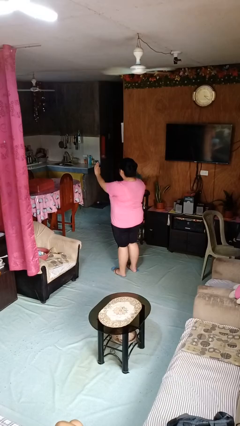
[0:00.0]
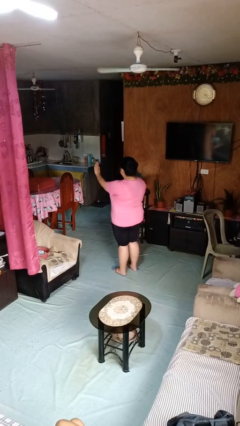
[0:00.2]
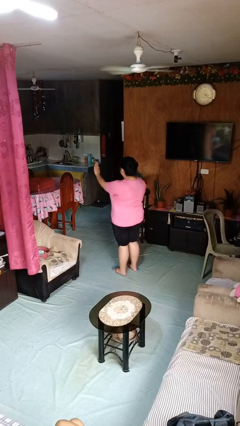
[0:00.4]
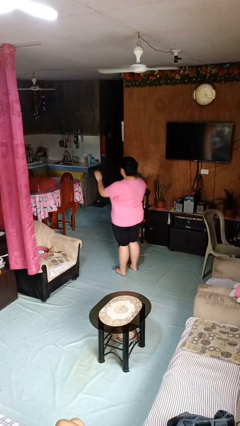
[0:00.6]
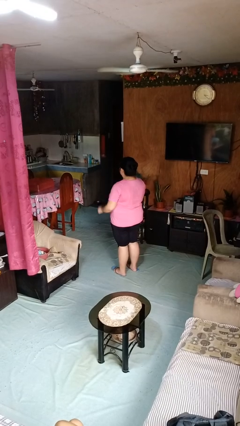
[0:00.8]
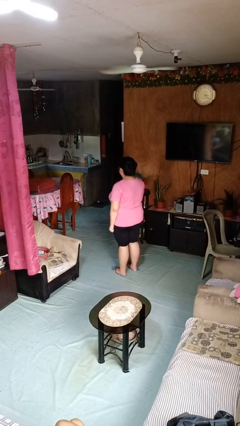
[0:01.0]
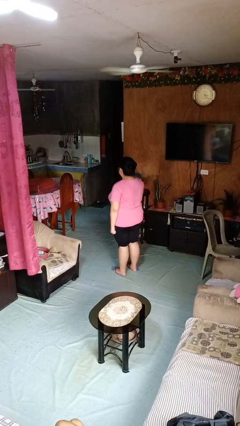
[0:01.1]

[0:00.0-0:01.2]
person gestures stop

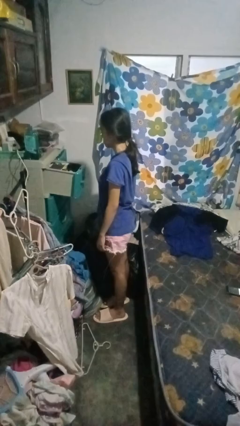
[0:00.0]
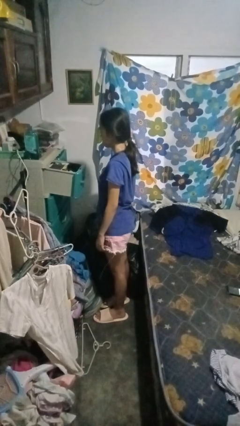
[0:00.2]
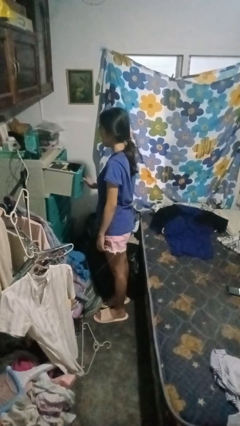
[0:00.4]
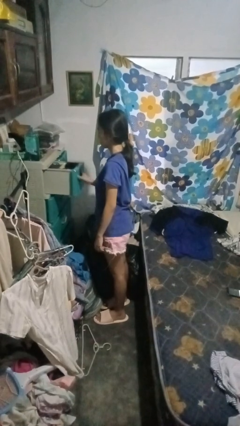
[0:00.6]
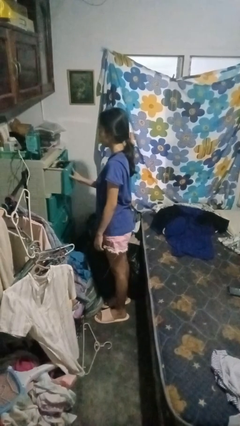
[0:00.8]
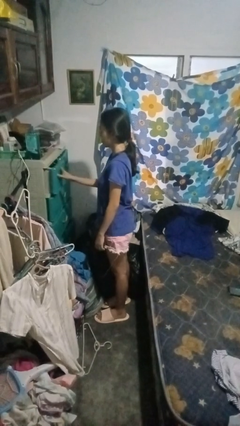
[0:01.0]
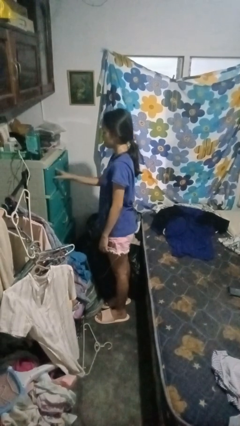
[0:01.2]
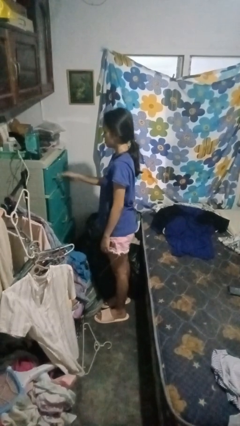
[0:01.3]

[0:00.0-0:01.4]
person closes dresser drawer

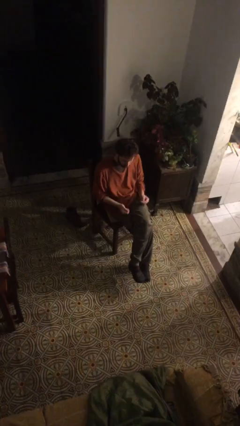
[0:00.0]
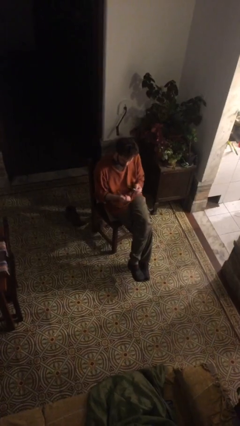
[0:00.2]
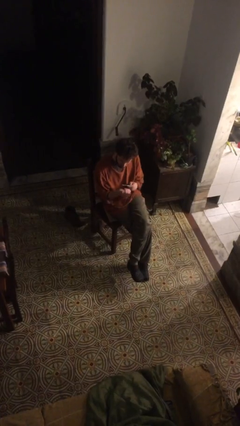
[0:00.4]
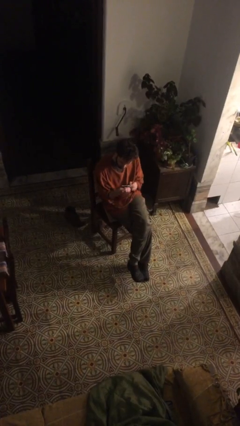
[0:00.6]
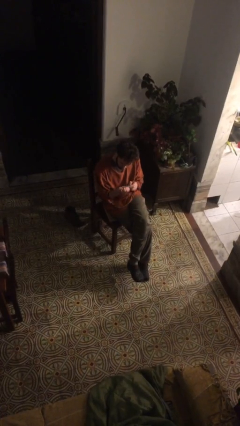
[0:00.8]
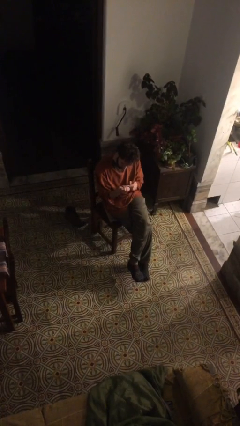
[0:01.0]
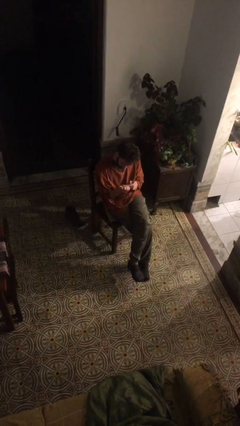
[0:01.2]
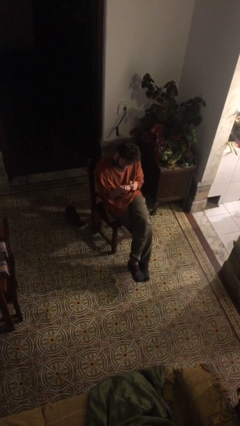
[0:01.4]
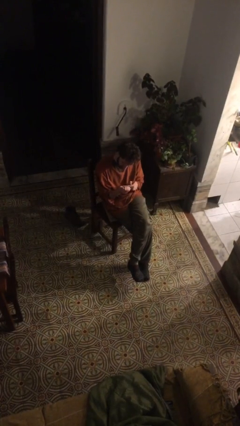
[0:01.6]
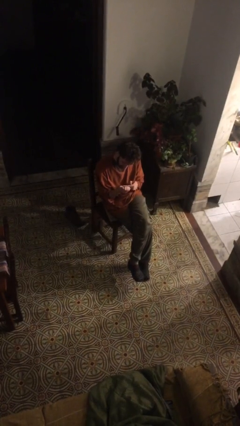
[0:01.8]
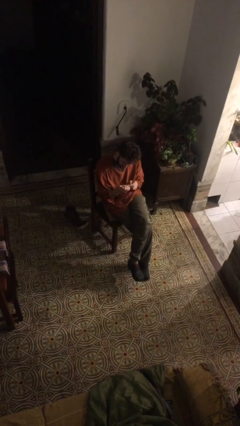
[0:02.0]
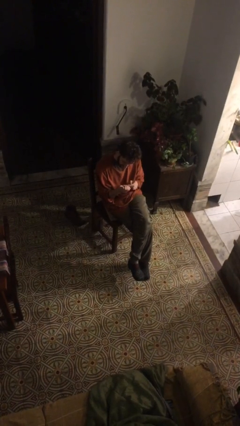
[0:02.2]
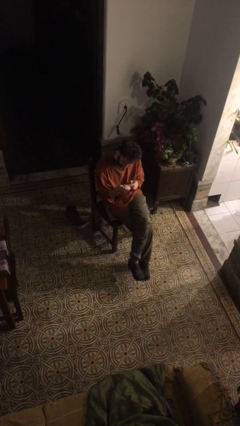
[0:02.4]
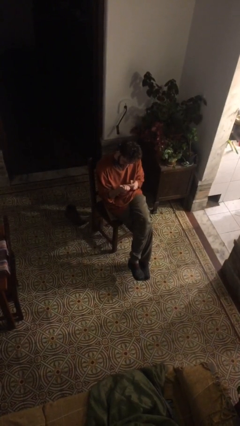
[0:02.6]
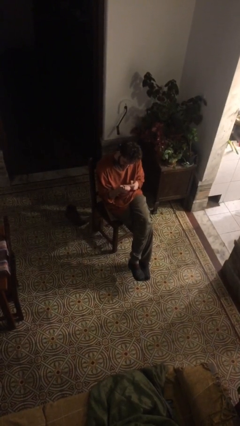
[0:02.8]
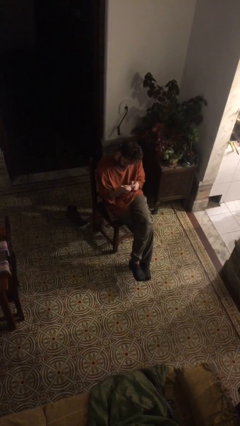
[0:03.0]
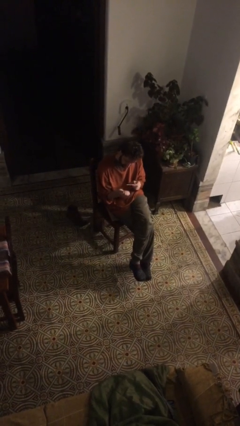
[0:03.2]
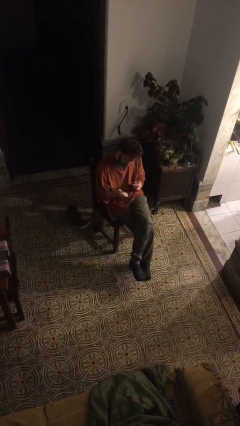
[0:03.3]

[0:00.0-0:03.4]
person files fingernails

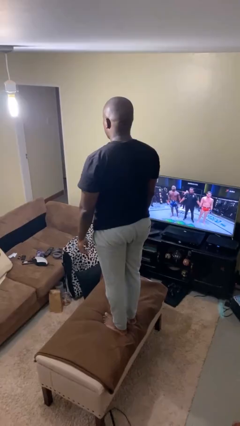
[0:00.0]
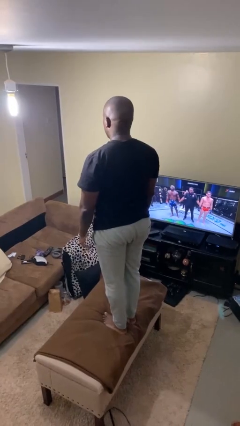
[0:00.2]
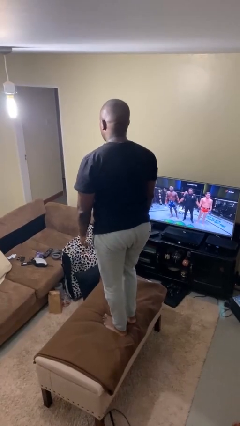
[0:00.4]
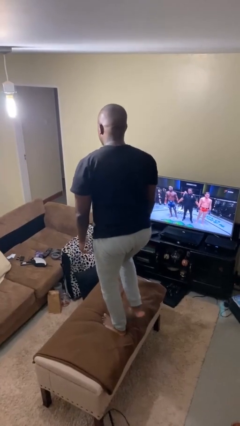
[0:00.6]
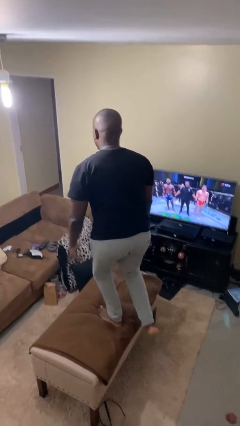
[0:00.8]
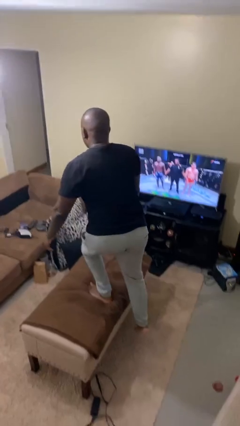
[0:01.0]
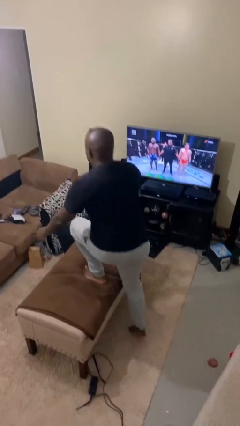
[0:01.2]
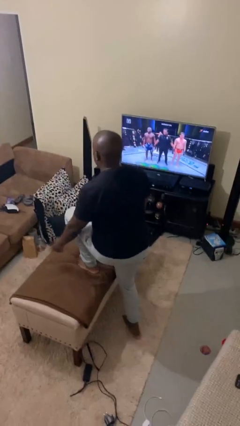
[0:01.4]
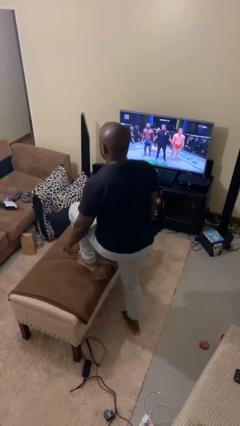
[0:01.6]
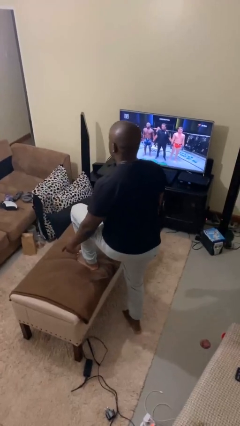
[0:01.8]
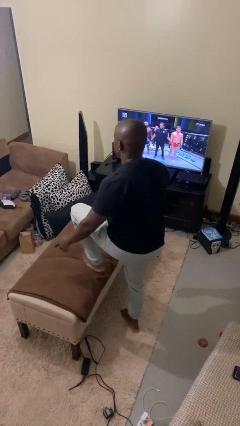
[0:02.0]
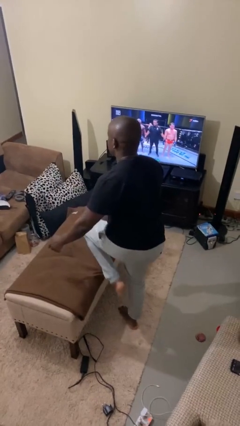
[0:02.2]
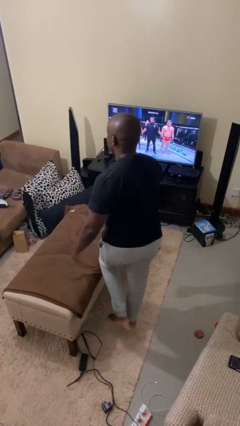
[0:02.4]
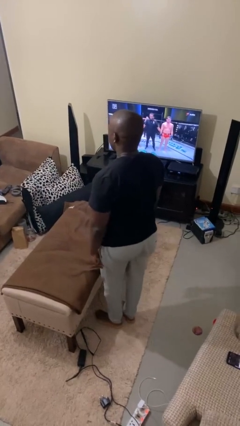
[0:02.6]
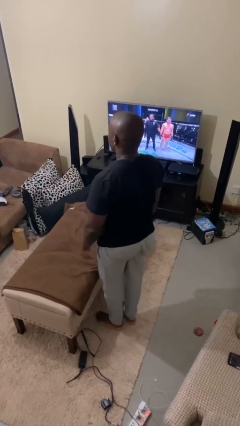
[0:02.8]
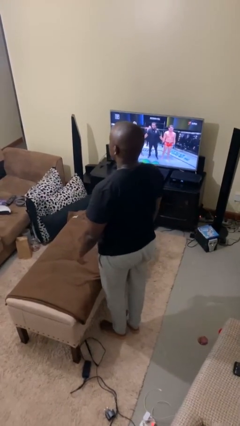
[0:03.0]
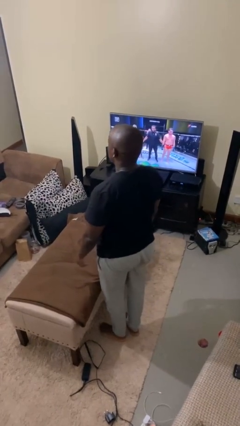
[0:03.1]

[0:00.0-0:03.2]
person climbs off table

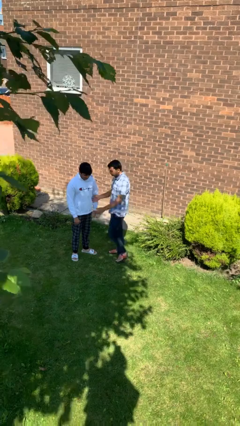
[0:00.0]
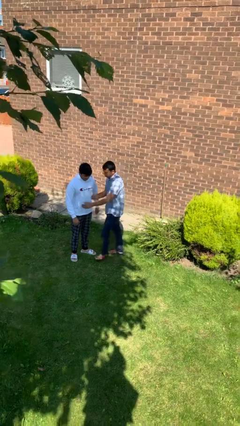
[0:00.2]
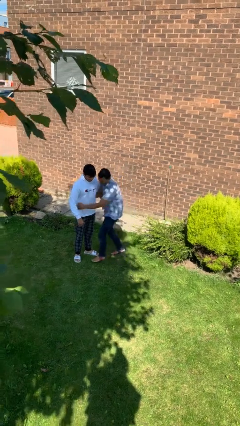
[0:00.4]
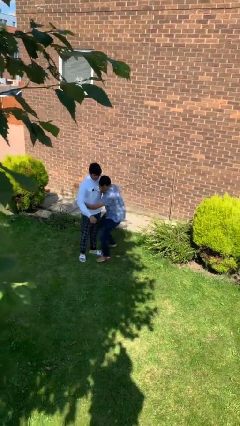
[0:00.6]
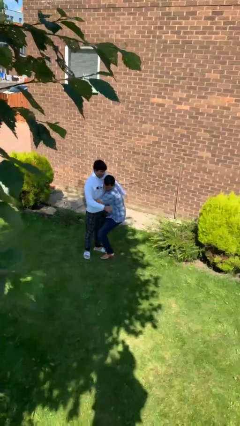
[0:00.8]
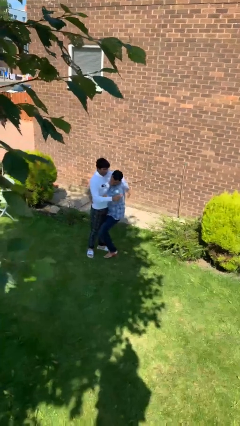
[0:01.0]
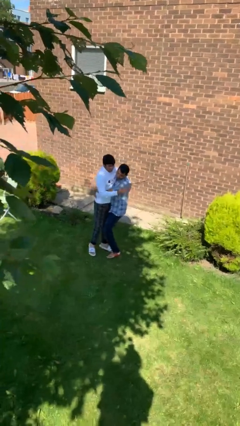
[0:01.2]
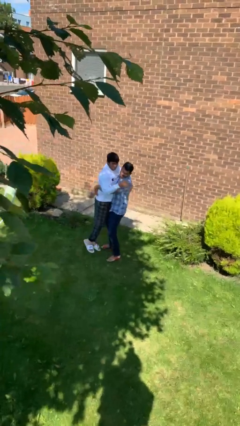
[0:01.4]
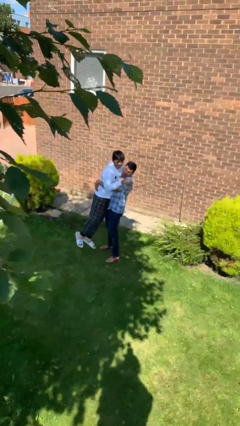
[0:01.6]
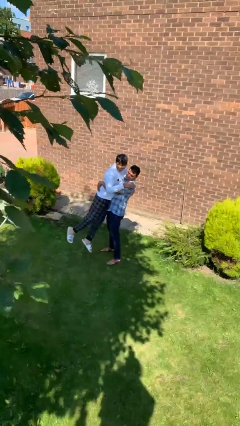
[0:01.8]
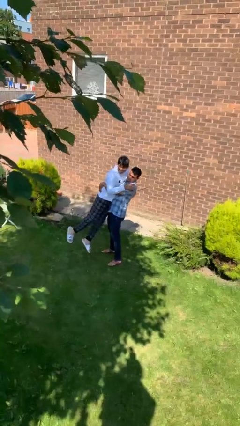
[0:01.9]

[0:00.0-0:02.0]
person picks up person

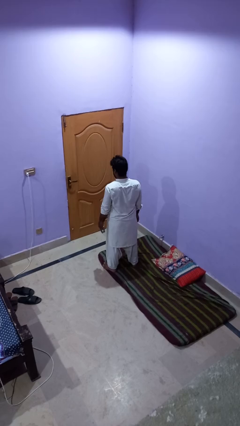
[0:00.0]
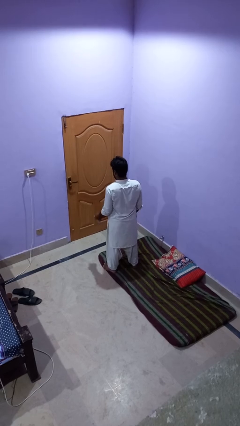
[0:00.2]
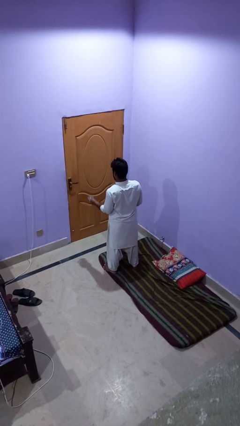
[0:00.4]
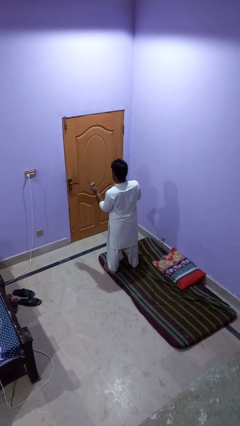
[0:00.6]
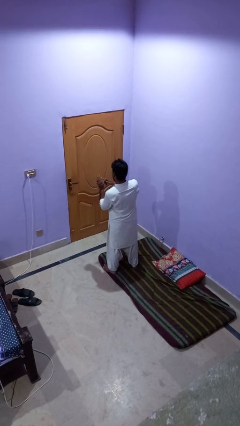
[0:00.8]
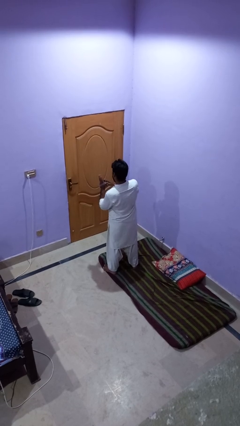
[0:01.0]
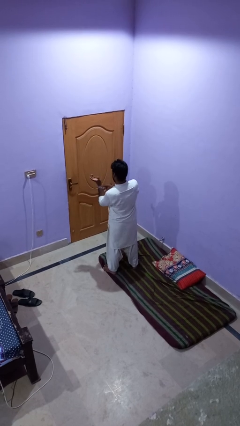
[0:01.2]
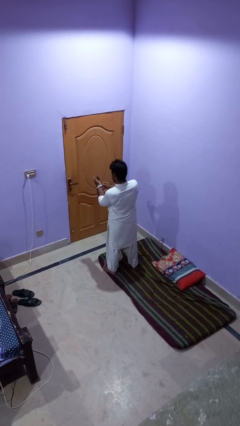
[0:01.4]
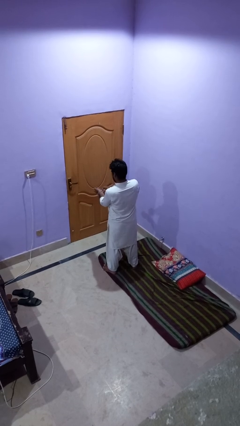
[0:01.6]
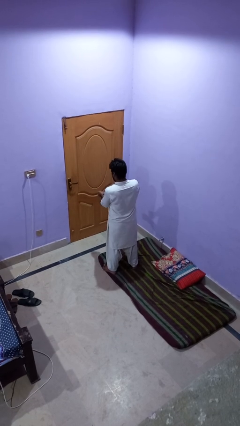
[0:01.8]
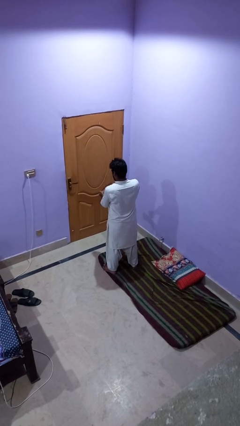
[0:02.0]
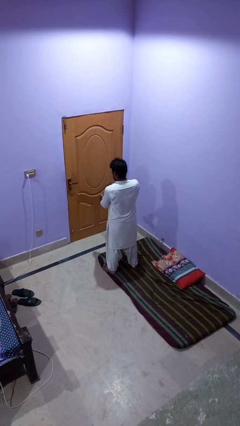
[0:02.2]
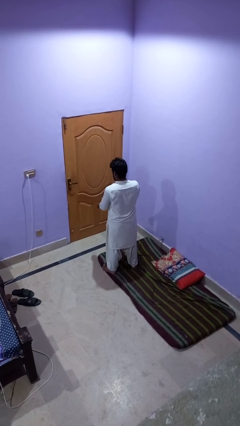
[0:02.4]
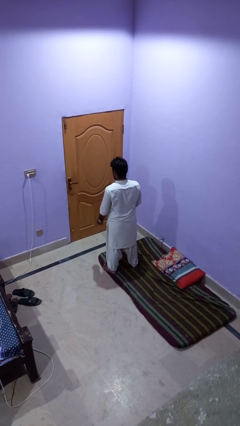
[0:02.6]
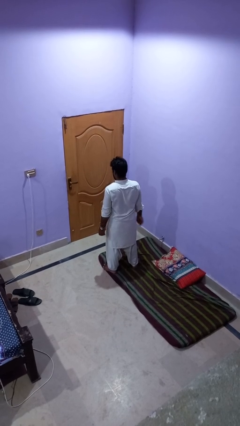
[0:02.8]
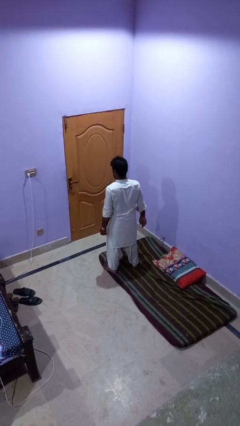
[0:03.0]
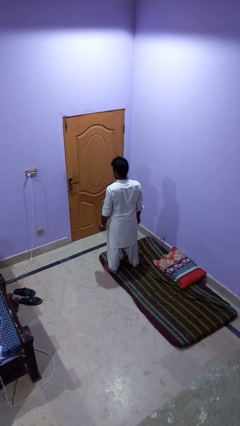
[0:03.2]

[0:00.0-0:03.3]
person puts on wristwatch

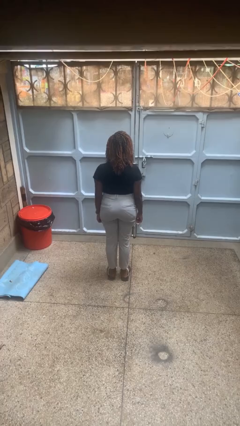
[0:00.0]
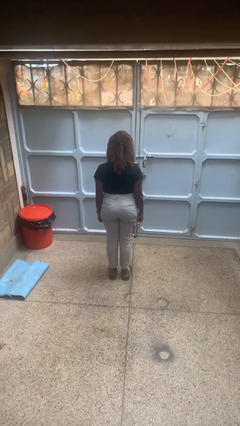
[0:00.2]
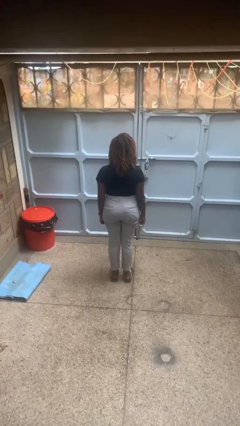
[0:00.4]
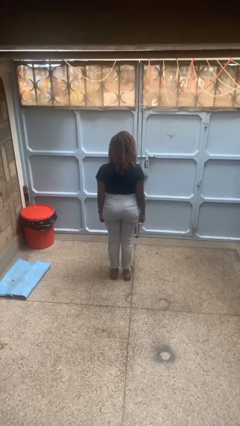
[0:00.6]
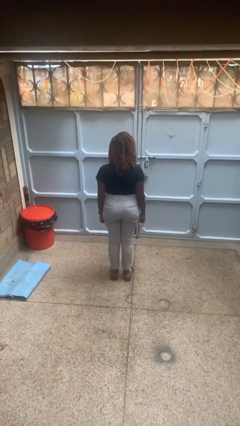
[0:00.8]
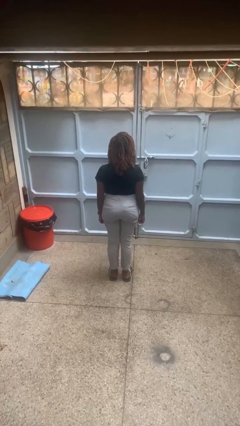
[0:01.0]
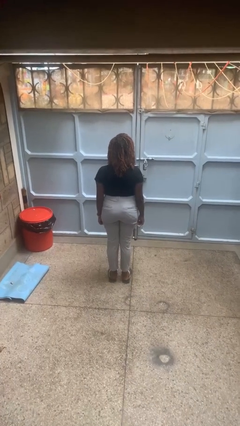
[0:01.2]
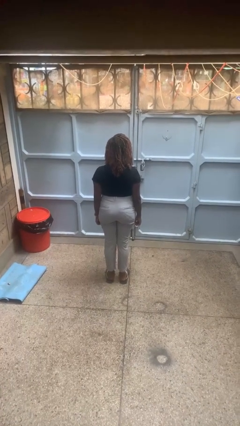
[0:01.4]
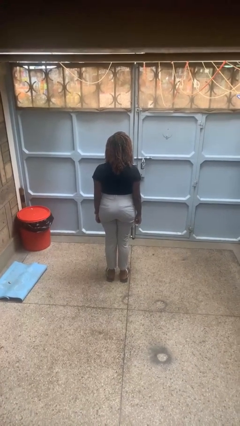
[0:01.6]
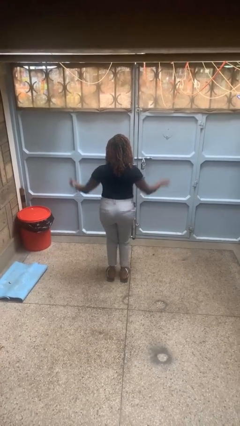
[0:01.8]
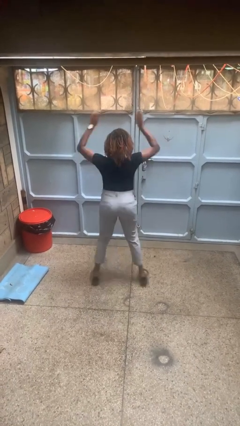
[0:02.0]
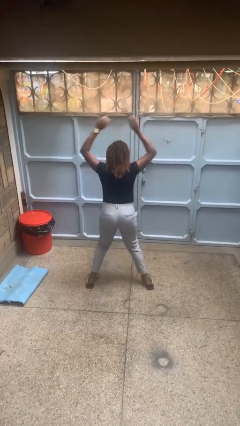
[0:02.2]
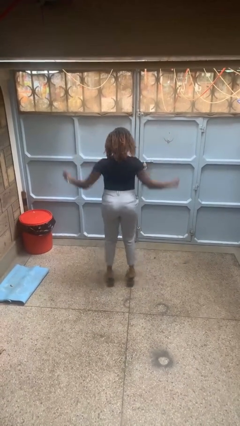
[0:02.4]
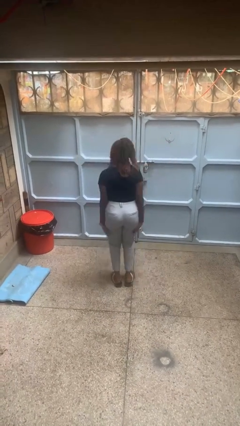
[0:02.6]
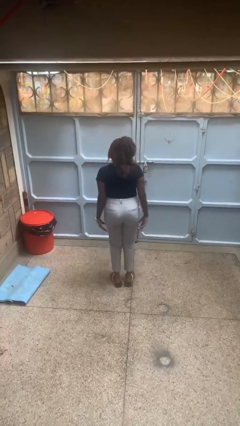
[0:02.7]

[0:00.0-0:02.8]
person exercises with jumping jacks
